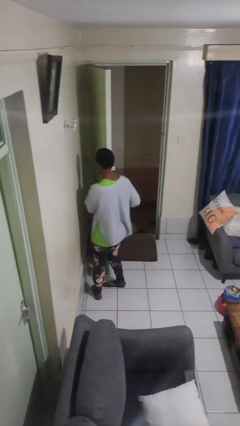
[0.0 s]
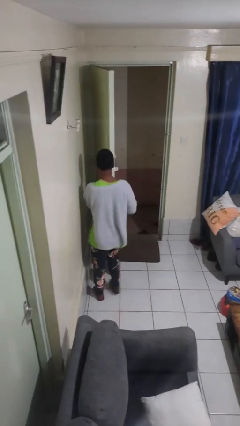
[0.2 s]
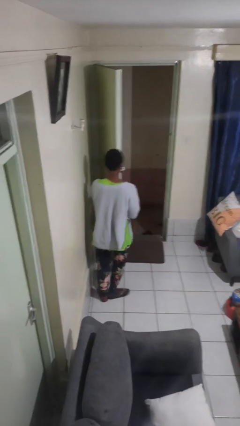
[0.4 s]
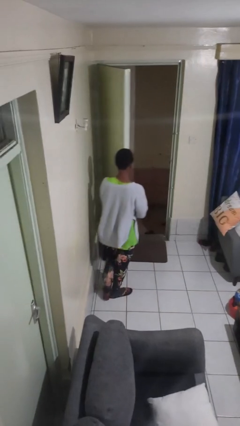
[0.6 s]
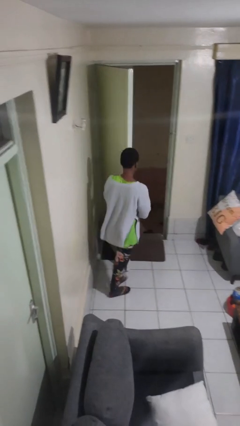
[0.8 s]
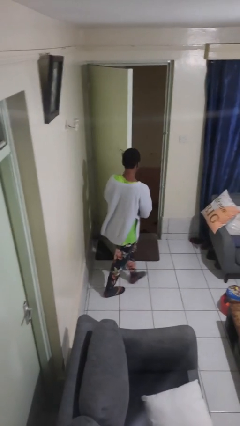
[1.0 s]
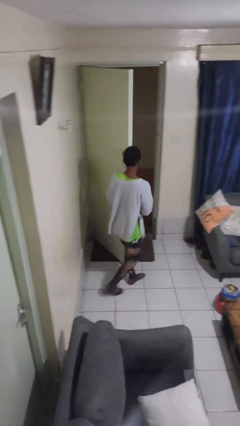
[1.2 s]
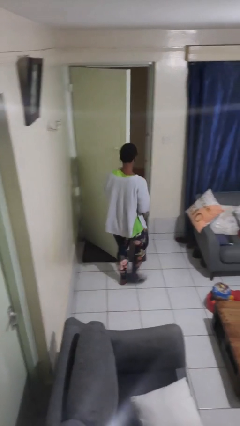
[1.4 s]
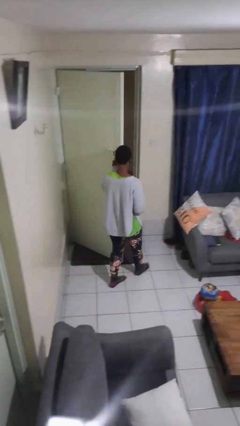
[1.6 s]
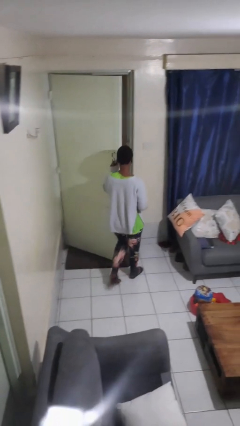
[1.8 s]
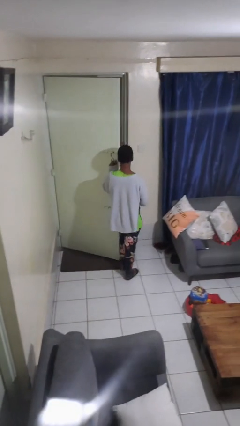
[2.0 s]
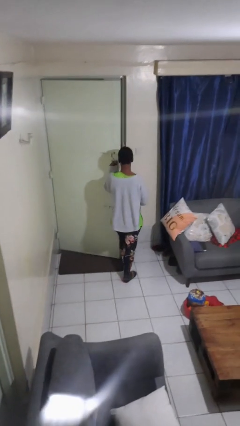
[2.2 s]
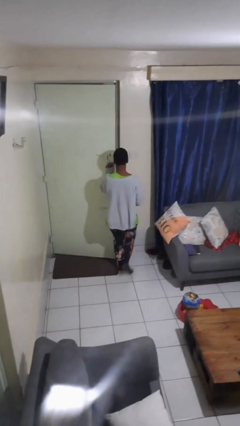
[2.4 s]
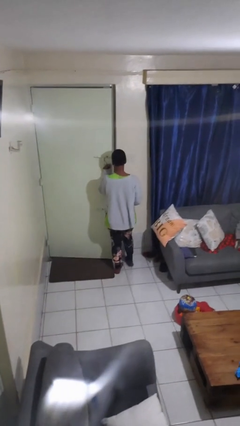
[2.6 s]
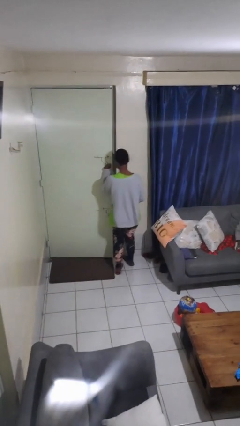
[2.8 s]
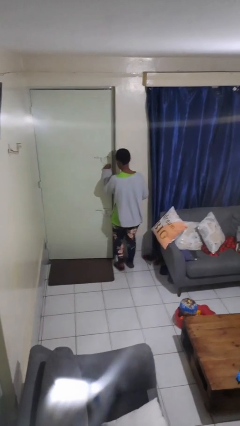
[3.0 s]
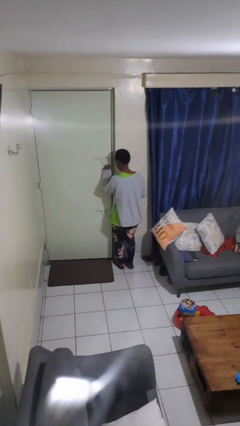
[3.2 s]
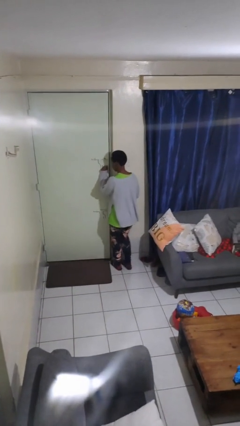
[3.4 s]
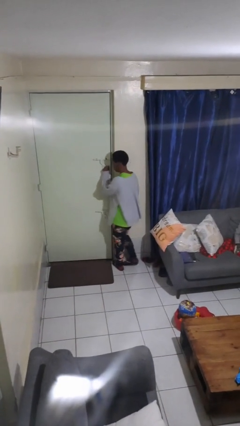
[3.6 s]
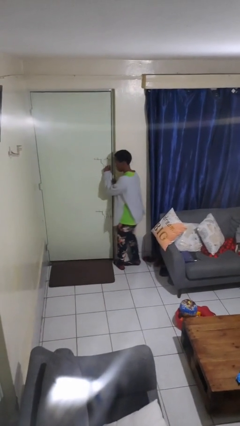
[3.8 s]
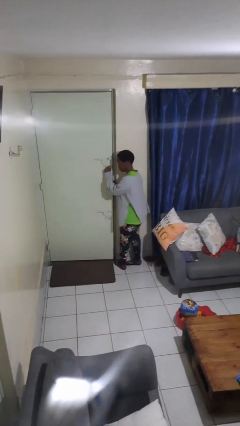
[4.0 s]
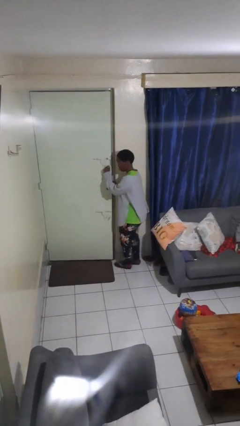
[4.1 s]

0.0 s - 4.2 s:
person closes facility door

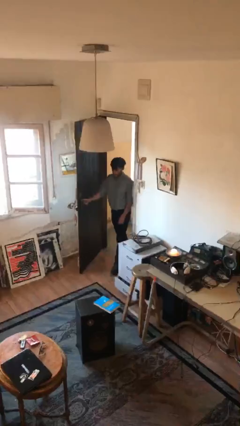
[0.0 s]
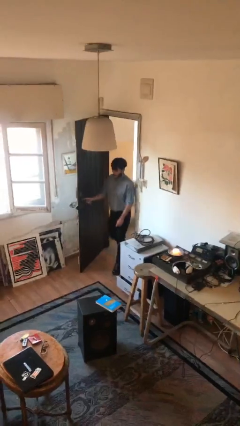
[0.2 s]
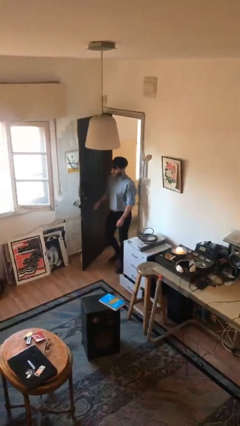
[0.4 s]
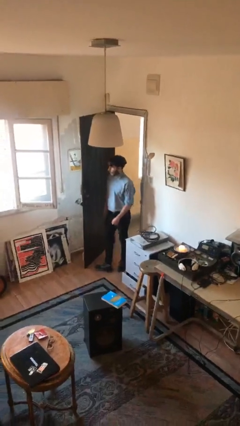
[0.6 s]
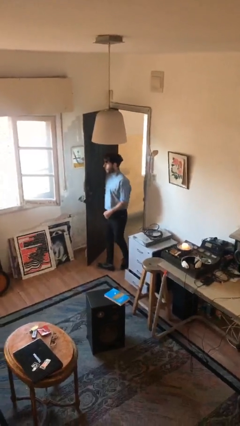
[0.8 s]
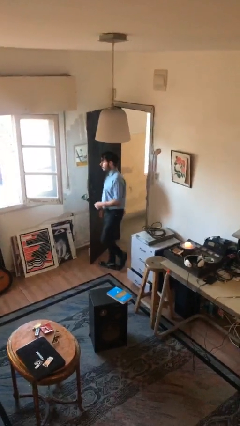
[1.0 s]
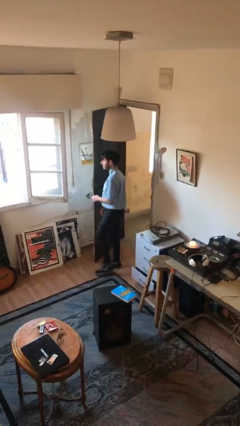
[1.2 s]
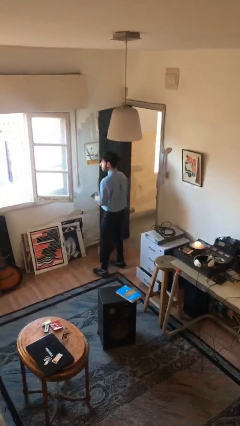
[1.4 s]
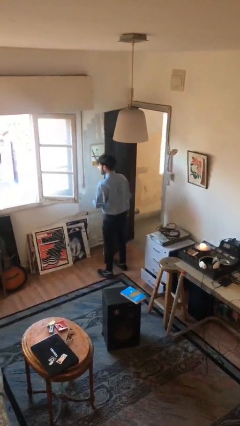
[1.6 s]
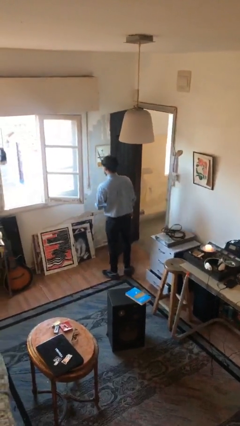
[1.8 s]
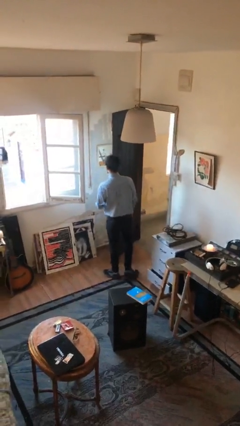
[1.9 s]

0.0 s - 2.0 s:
person enters scene through structure

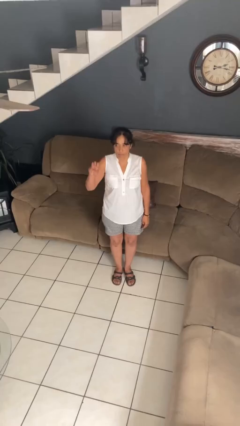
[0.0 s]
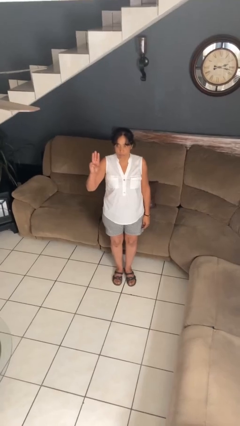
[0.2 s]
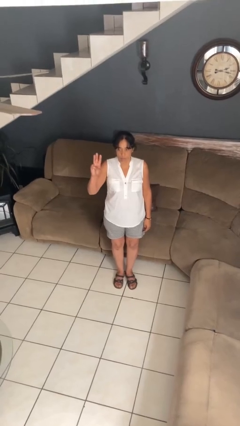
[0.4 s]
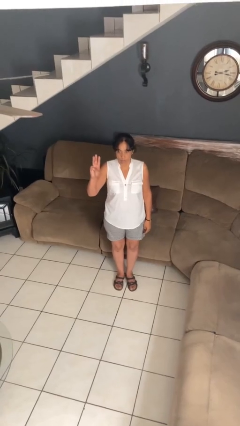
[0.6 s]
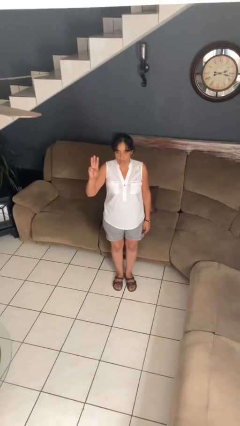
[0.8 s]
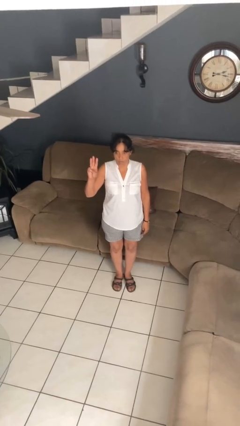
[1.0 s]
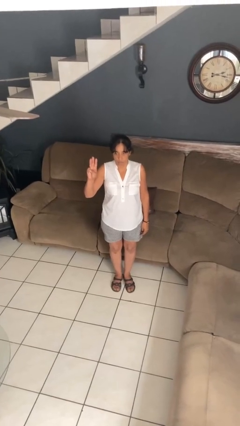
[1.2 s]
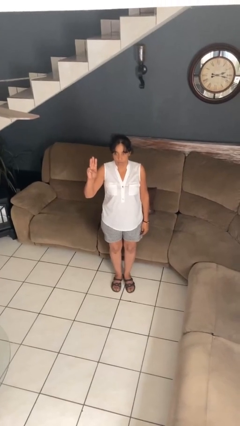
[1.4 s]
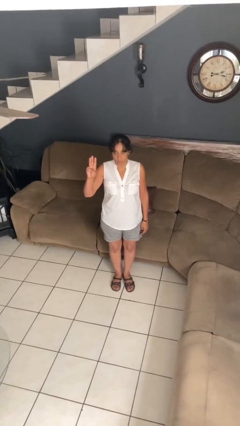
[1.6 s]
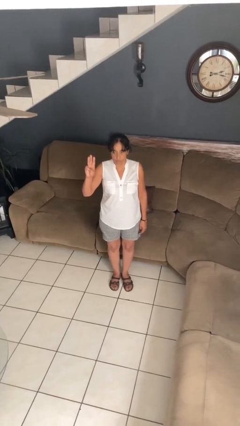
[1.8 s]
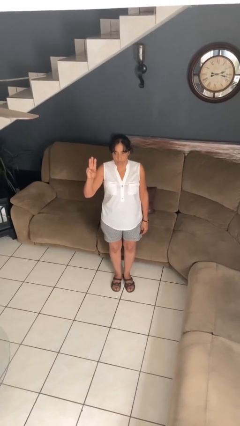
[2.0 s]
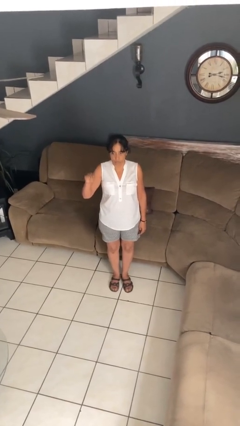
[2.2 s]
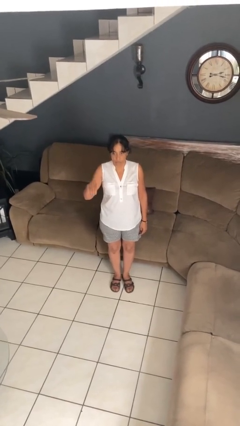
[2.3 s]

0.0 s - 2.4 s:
person gestures number three

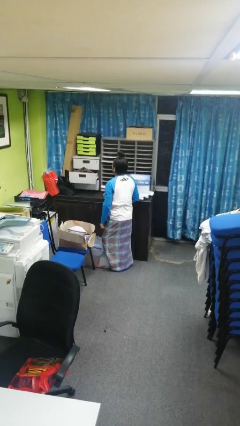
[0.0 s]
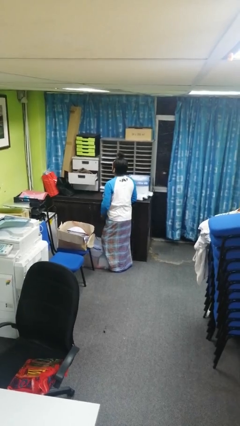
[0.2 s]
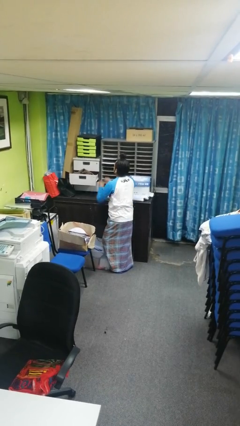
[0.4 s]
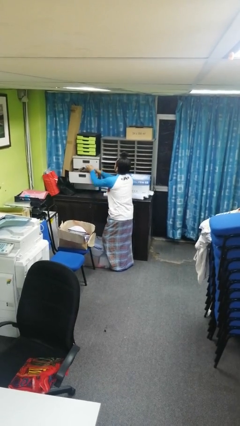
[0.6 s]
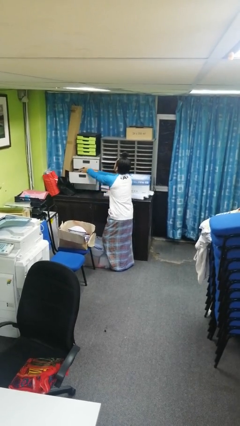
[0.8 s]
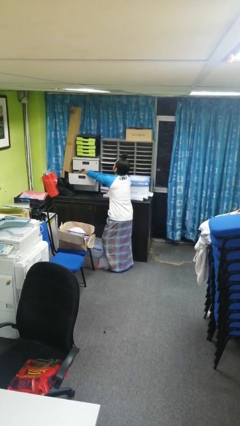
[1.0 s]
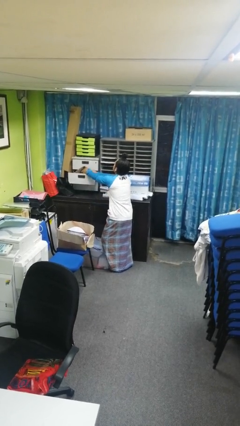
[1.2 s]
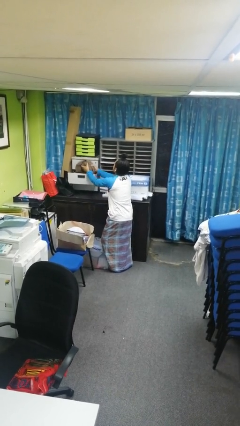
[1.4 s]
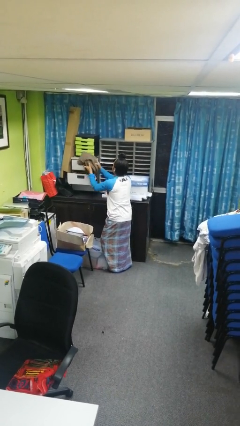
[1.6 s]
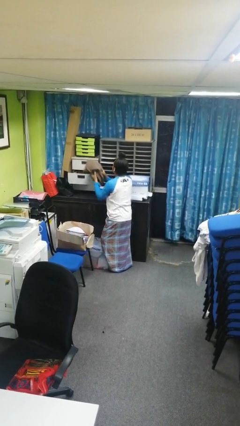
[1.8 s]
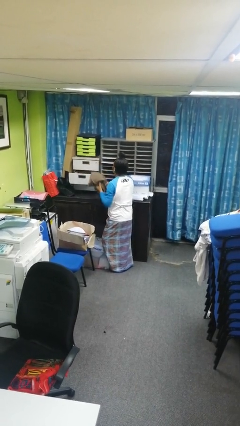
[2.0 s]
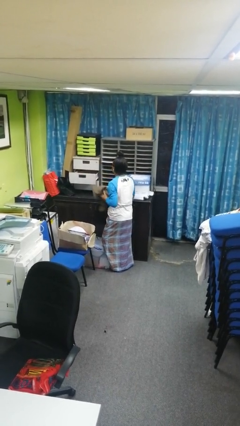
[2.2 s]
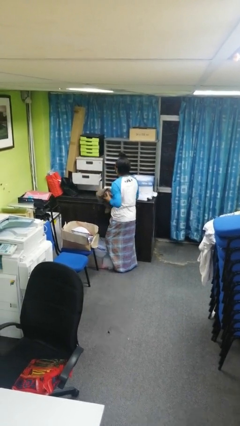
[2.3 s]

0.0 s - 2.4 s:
person takes clothes from dresser

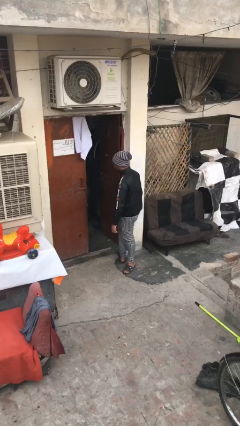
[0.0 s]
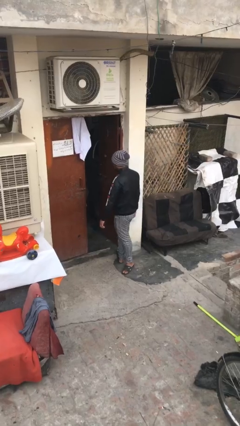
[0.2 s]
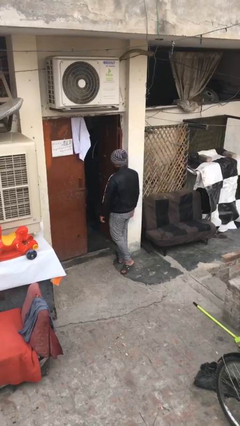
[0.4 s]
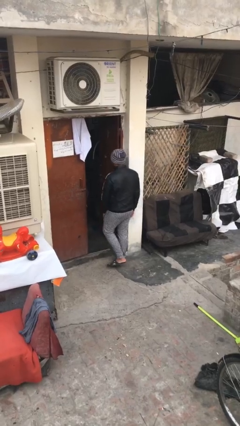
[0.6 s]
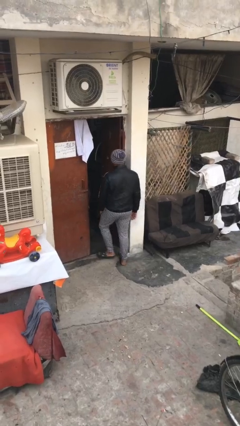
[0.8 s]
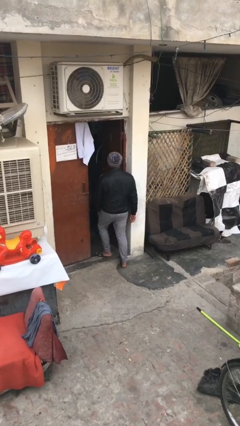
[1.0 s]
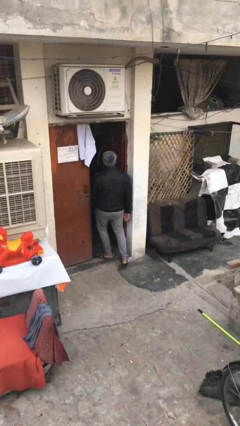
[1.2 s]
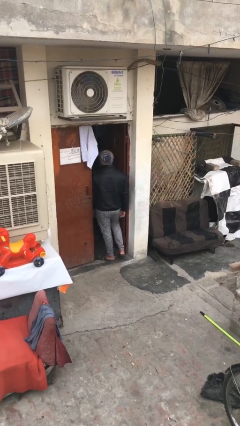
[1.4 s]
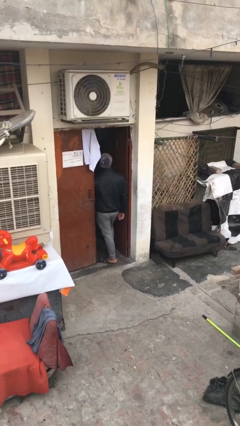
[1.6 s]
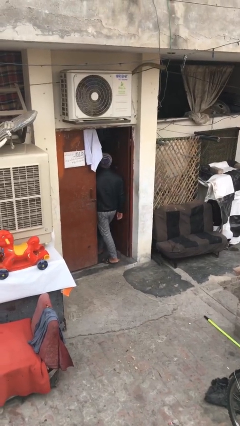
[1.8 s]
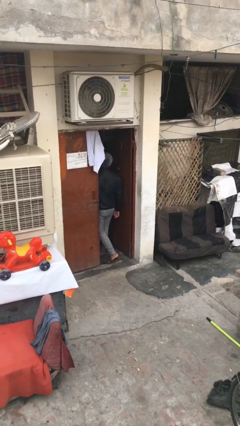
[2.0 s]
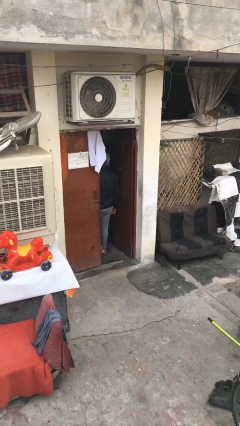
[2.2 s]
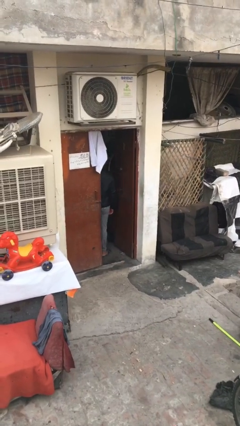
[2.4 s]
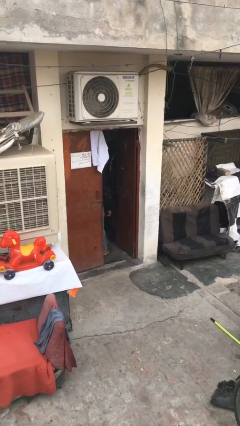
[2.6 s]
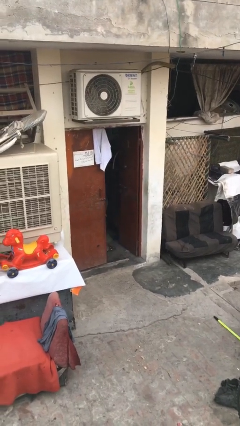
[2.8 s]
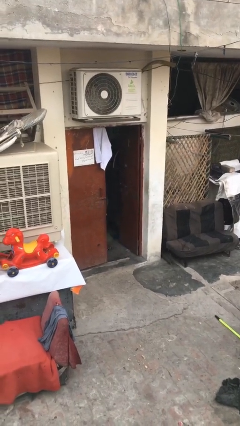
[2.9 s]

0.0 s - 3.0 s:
person exits scene through structure

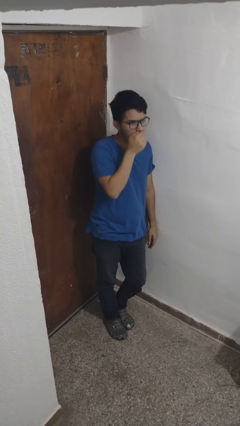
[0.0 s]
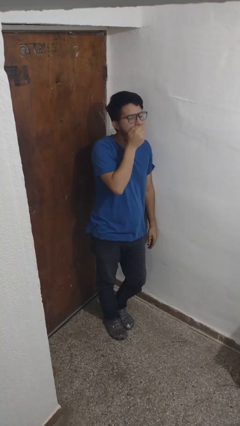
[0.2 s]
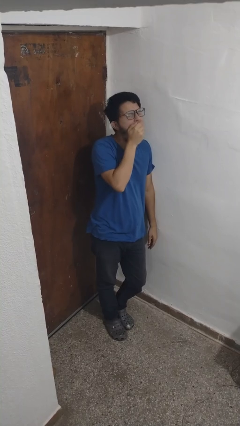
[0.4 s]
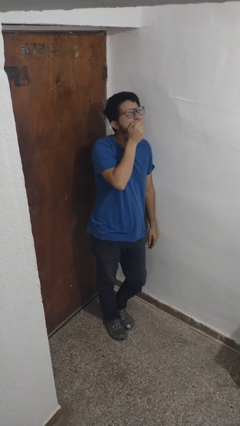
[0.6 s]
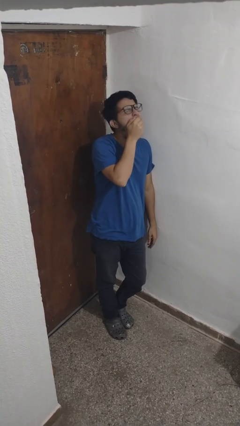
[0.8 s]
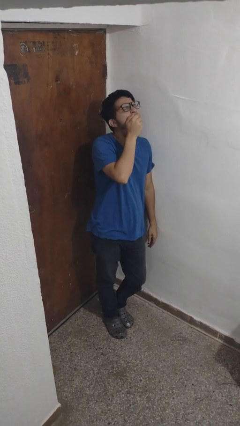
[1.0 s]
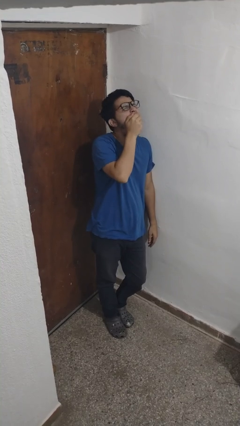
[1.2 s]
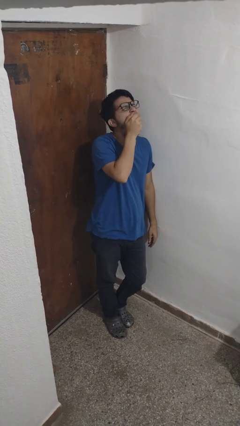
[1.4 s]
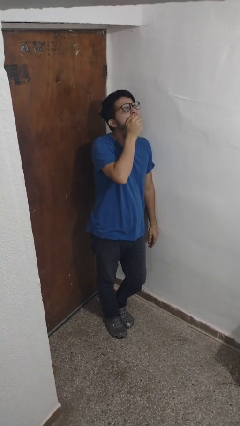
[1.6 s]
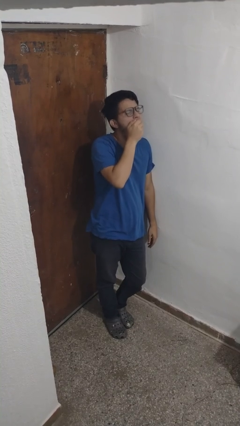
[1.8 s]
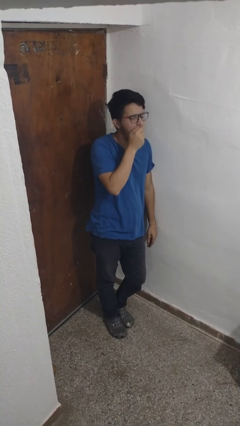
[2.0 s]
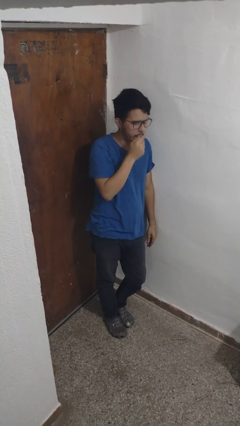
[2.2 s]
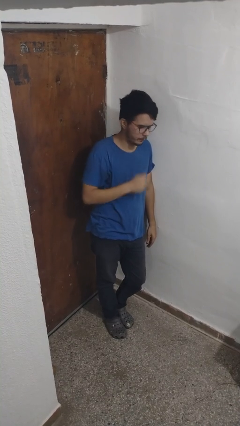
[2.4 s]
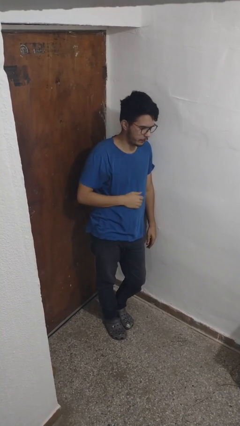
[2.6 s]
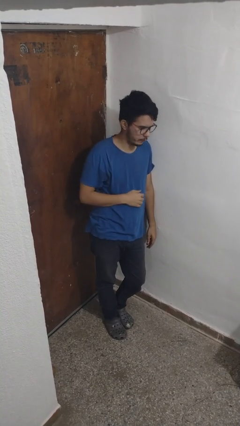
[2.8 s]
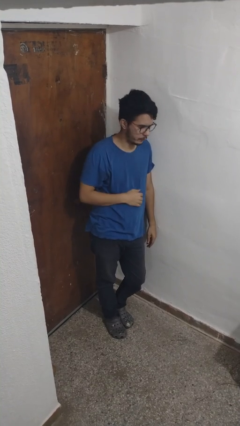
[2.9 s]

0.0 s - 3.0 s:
person yawns

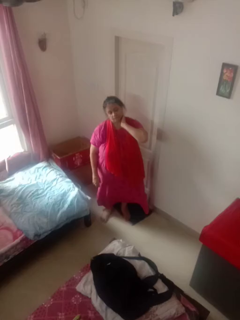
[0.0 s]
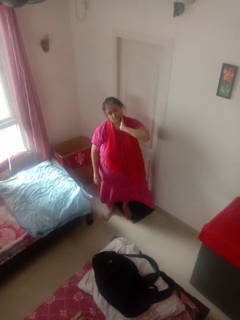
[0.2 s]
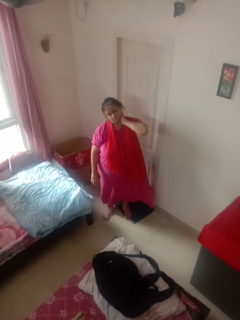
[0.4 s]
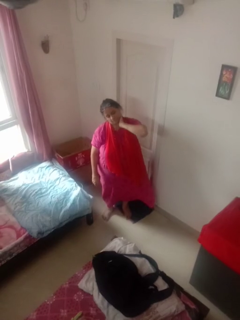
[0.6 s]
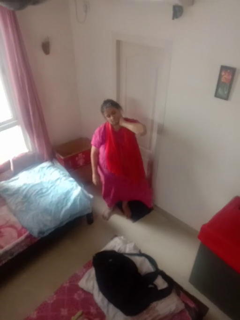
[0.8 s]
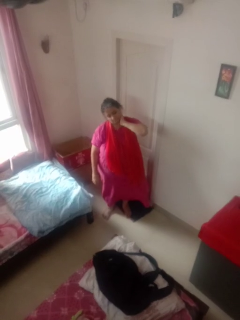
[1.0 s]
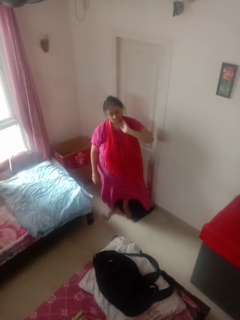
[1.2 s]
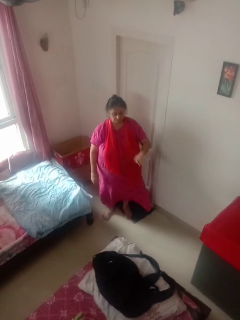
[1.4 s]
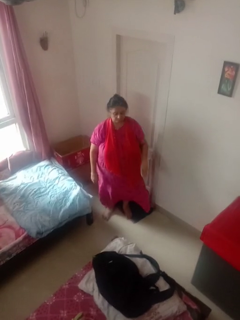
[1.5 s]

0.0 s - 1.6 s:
person rubs neck
